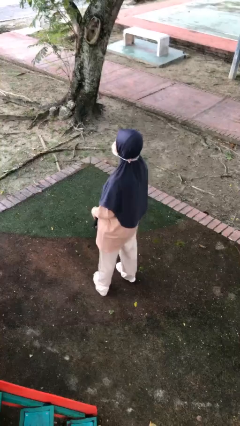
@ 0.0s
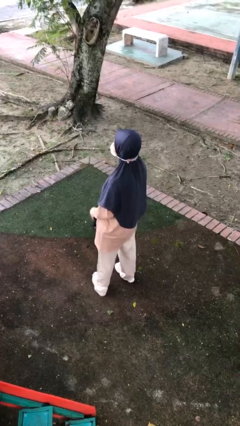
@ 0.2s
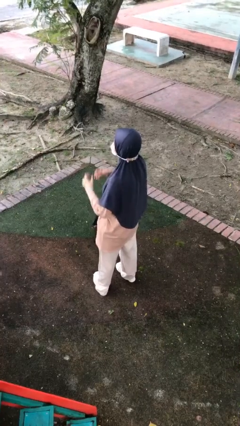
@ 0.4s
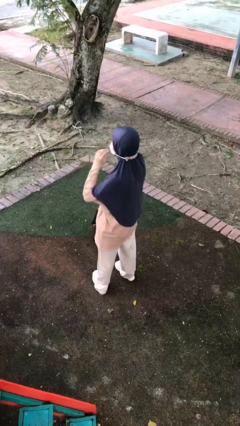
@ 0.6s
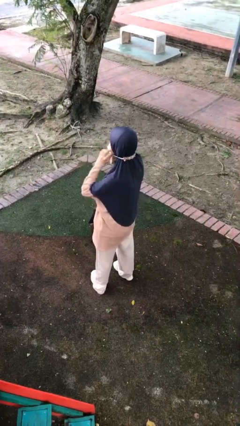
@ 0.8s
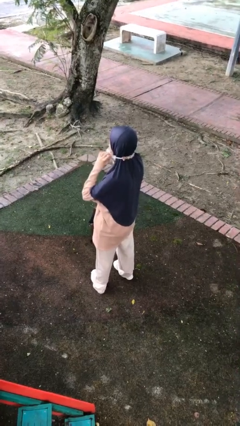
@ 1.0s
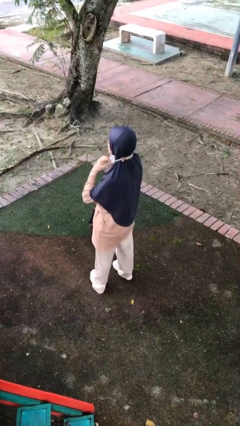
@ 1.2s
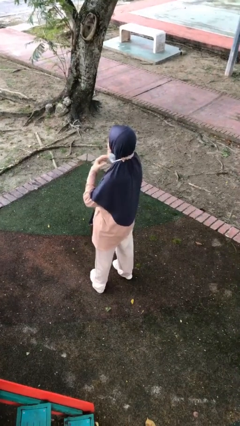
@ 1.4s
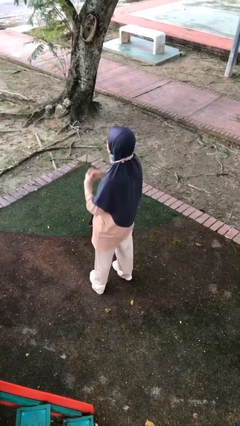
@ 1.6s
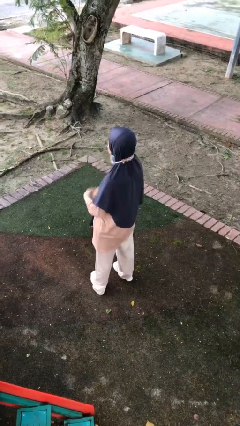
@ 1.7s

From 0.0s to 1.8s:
person takes off facemask

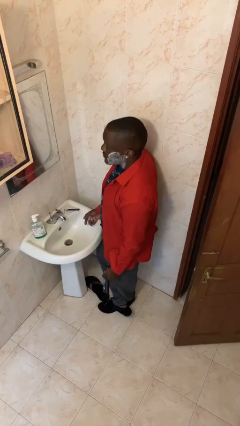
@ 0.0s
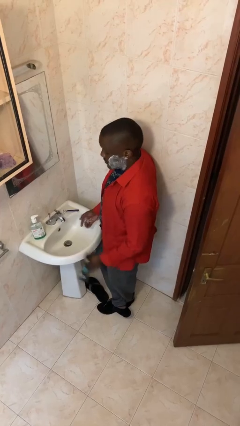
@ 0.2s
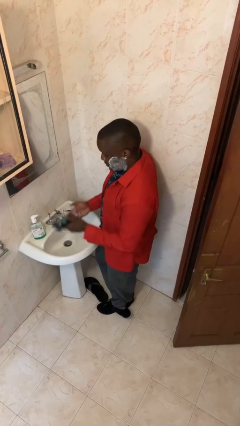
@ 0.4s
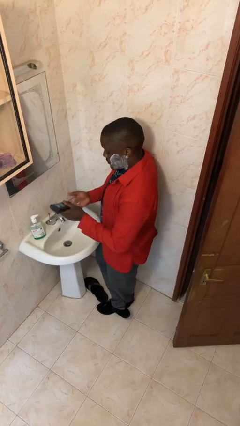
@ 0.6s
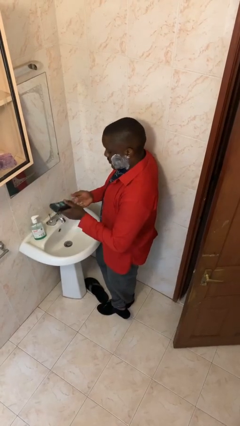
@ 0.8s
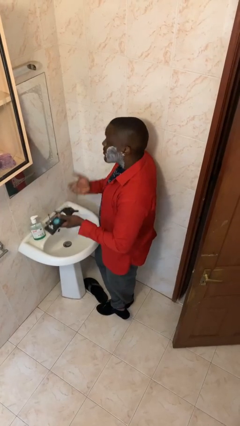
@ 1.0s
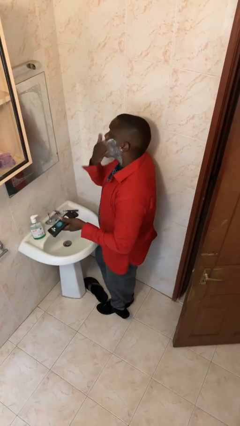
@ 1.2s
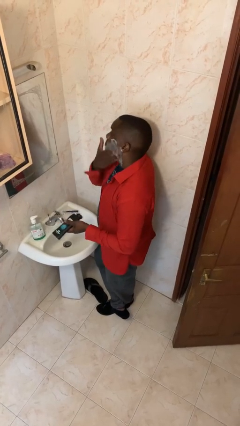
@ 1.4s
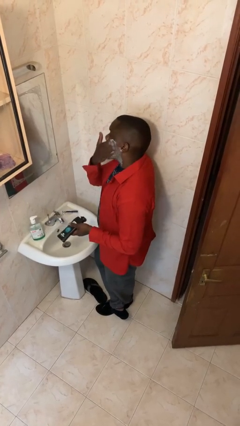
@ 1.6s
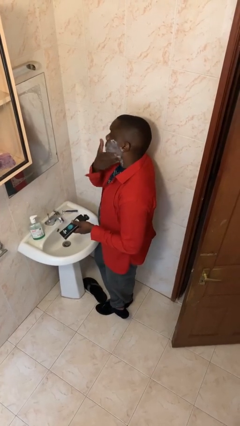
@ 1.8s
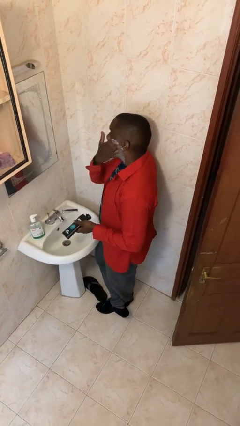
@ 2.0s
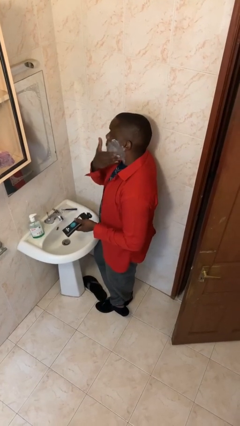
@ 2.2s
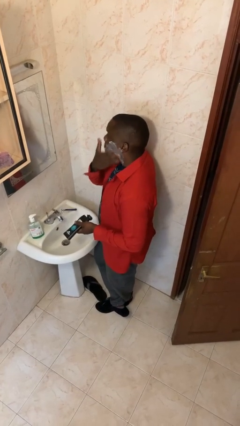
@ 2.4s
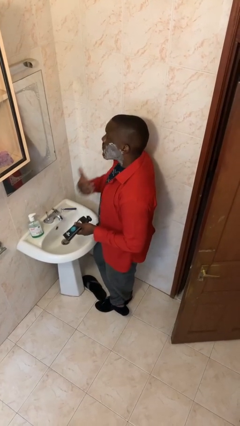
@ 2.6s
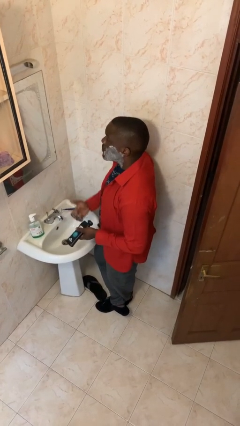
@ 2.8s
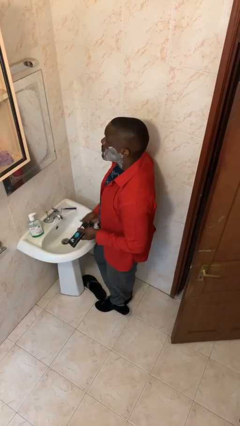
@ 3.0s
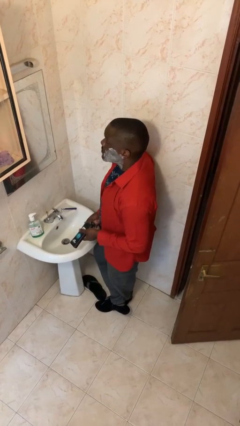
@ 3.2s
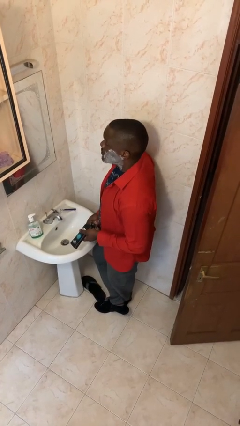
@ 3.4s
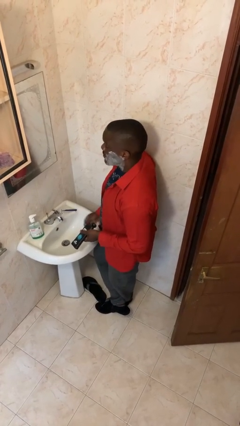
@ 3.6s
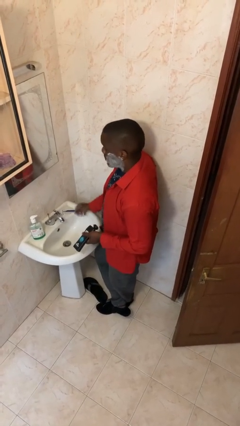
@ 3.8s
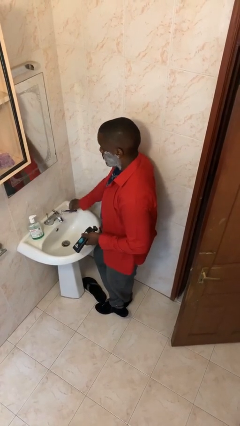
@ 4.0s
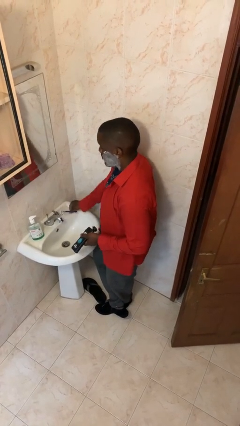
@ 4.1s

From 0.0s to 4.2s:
person applies shaving cream

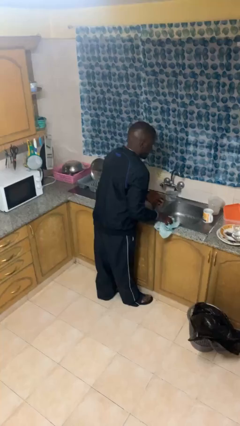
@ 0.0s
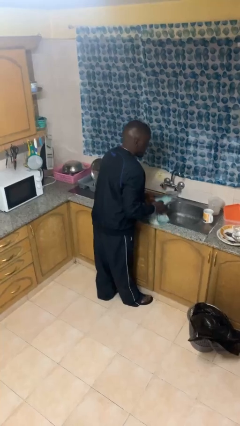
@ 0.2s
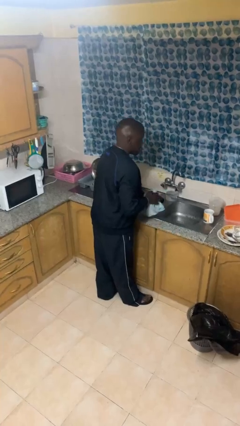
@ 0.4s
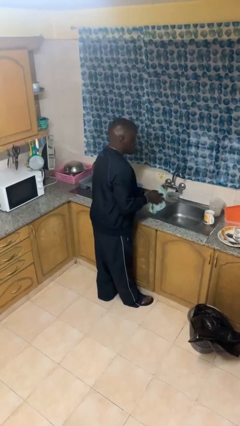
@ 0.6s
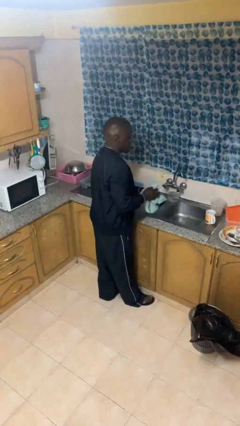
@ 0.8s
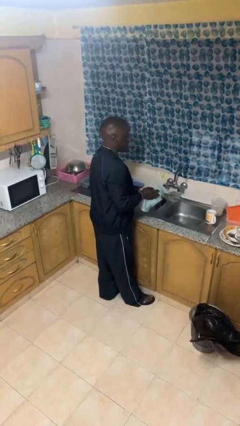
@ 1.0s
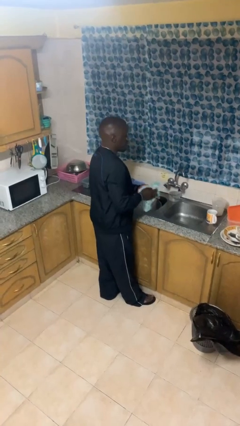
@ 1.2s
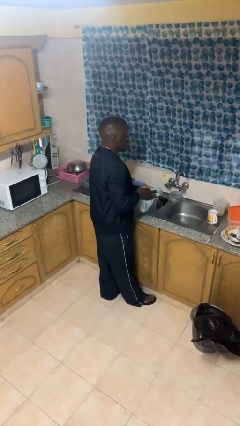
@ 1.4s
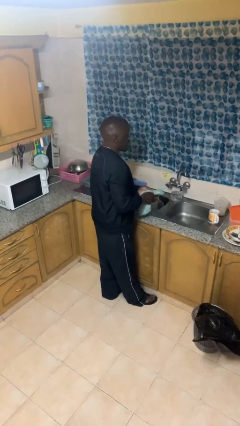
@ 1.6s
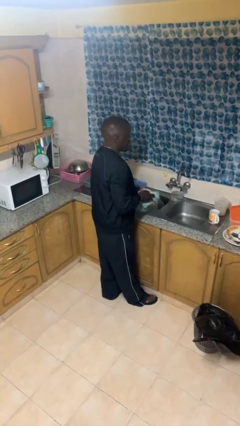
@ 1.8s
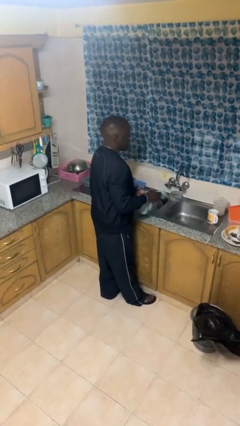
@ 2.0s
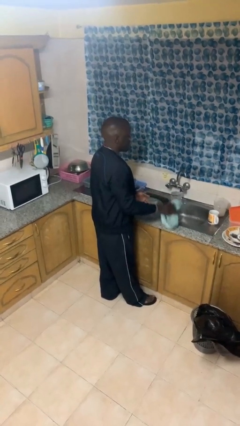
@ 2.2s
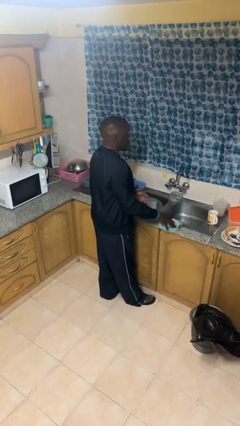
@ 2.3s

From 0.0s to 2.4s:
person dries hands with towel

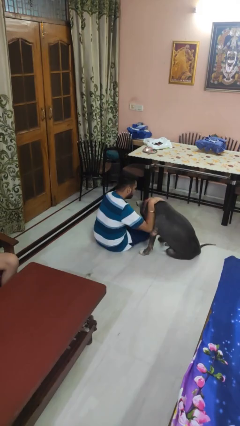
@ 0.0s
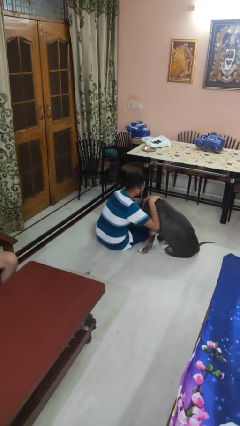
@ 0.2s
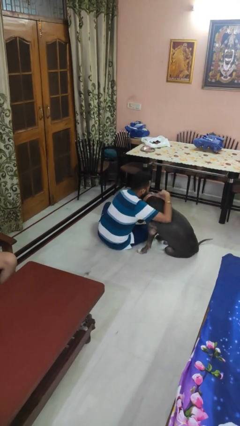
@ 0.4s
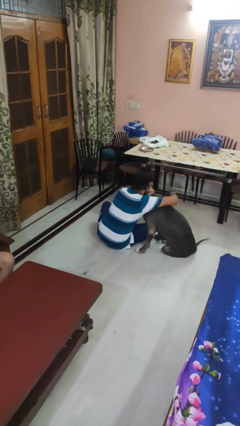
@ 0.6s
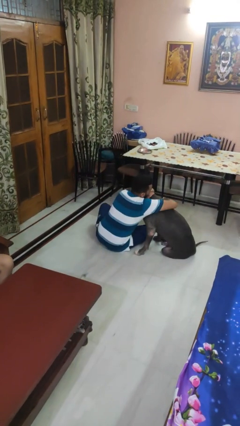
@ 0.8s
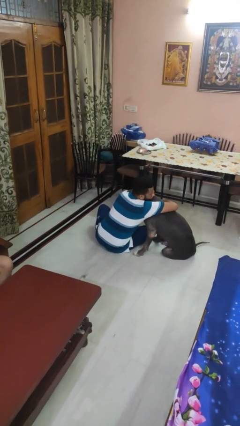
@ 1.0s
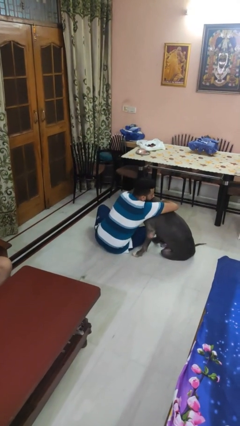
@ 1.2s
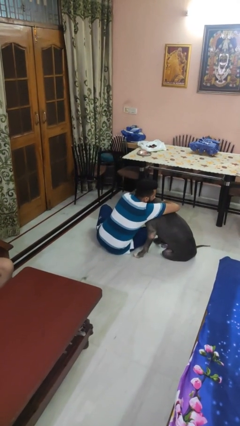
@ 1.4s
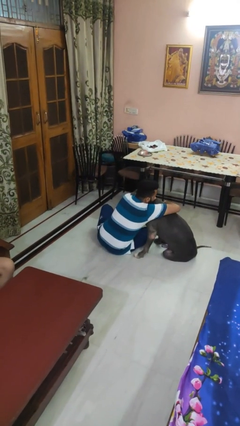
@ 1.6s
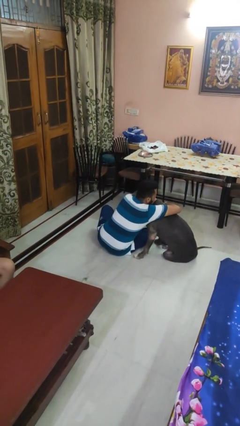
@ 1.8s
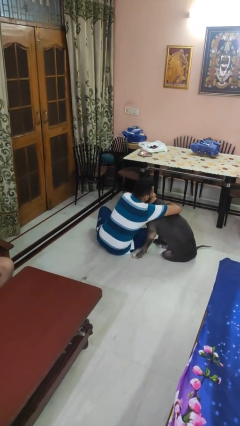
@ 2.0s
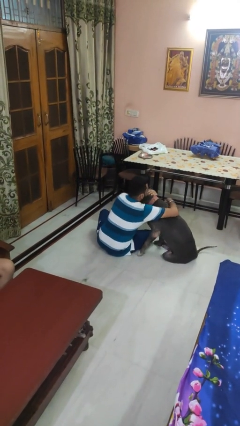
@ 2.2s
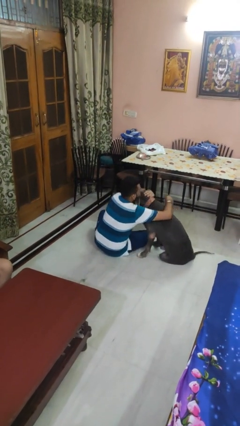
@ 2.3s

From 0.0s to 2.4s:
person hugs dog

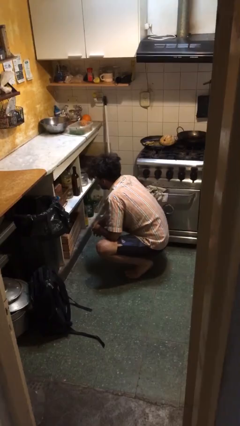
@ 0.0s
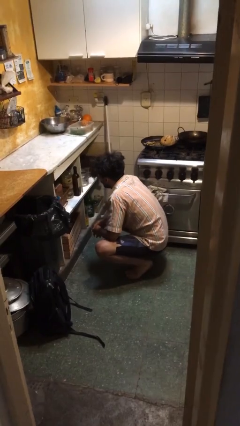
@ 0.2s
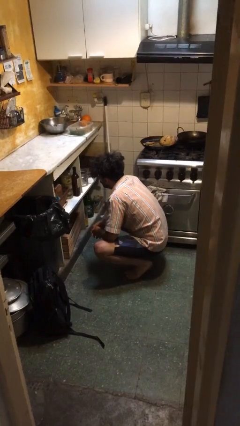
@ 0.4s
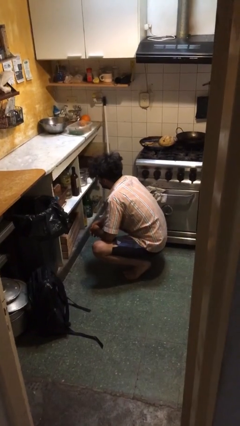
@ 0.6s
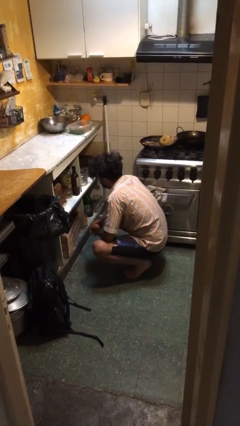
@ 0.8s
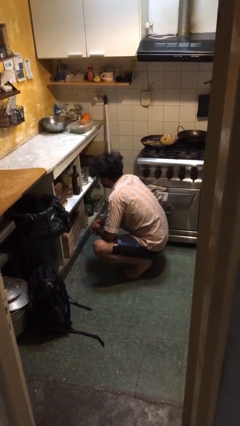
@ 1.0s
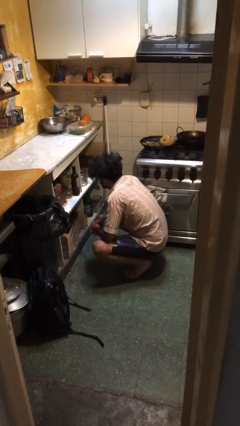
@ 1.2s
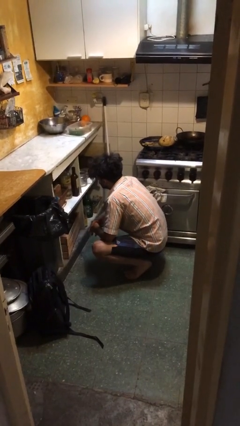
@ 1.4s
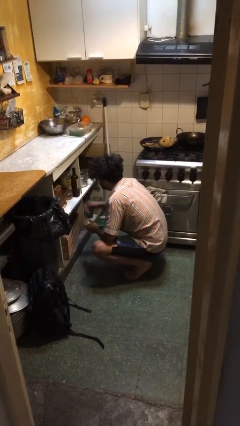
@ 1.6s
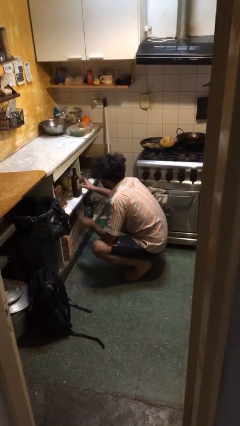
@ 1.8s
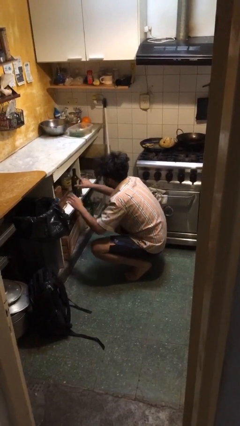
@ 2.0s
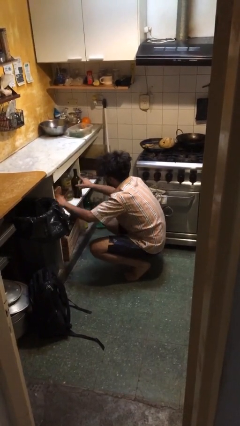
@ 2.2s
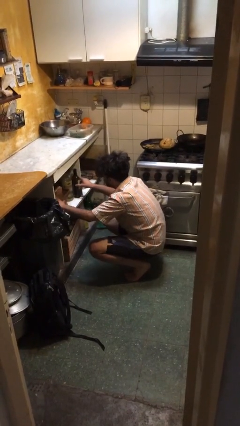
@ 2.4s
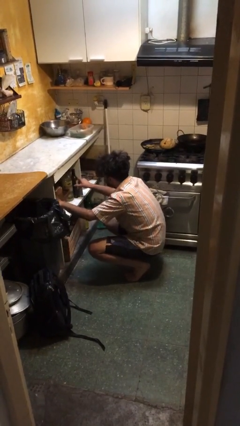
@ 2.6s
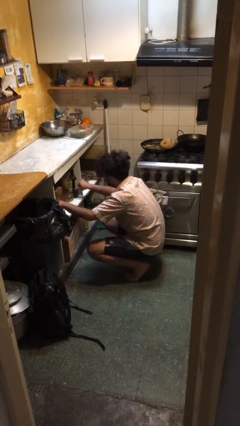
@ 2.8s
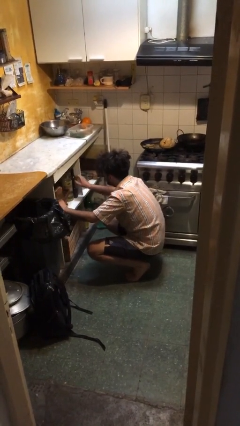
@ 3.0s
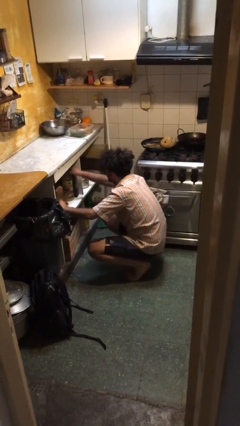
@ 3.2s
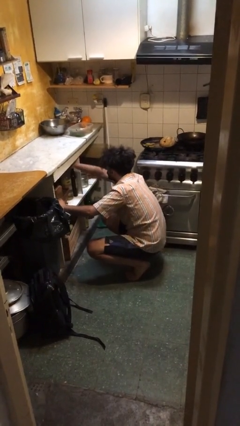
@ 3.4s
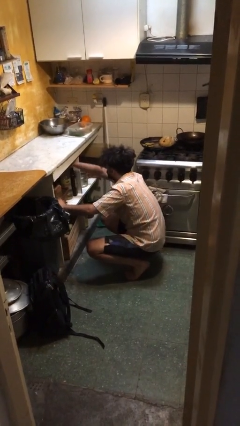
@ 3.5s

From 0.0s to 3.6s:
person searches in cabinet

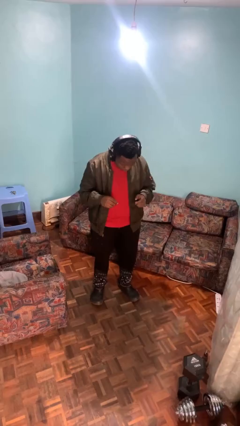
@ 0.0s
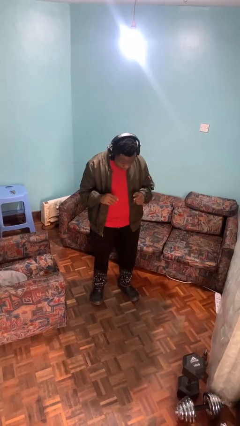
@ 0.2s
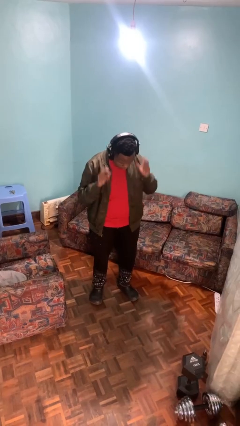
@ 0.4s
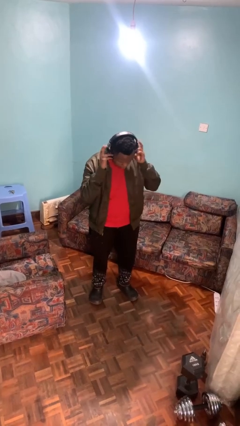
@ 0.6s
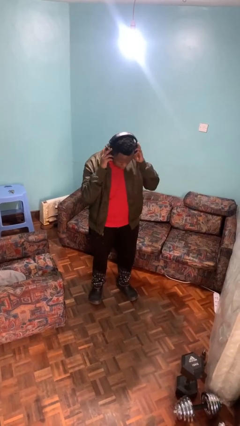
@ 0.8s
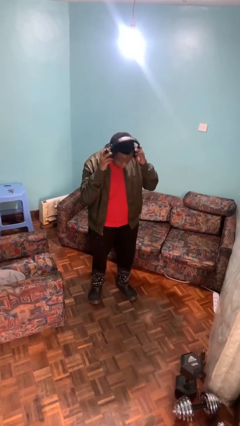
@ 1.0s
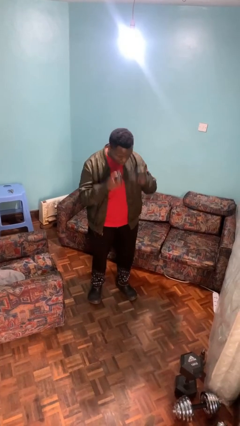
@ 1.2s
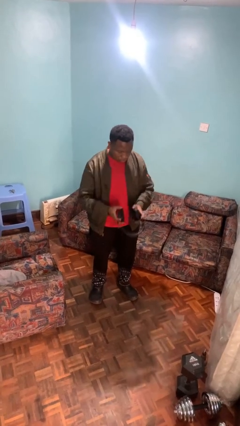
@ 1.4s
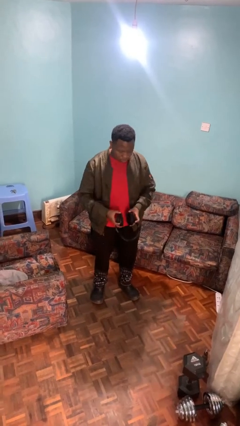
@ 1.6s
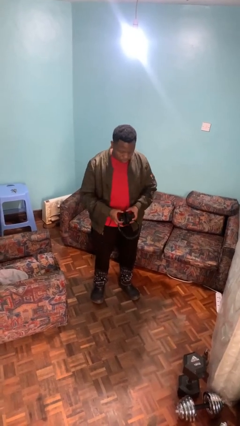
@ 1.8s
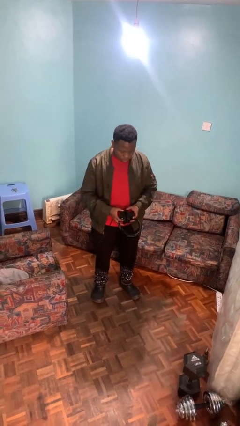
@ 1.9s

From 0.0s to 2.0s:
person takes off headphones

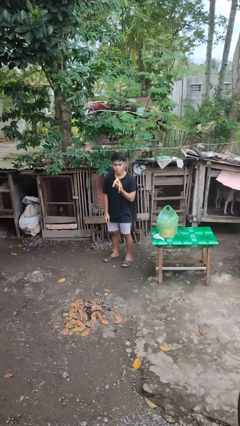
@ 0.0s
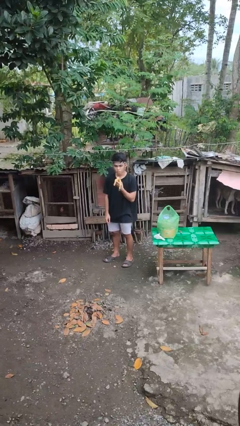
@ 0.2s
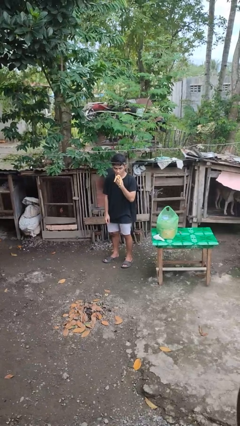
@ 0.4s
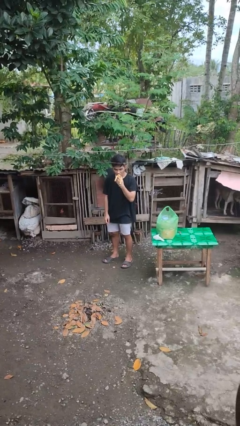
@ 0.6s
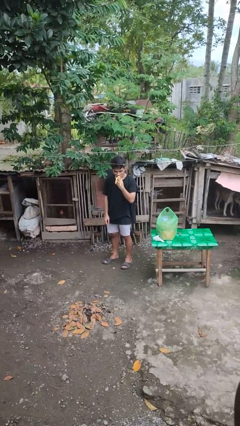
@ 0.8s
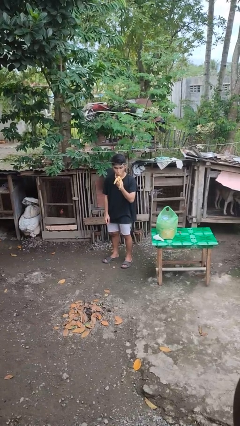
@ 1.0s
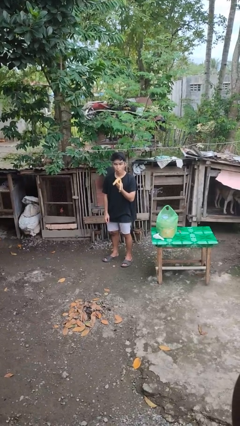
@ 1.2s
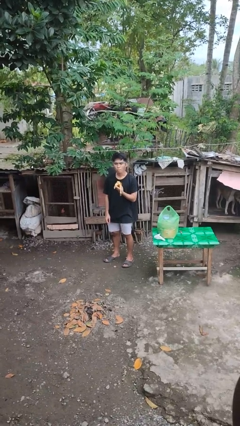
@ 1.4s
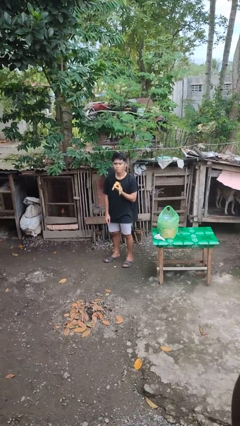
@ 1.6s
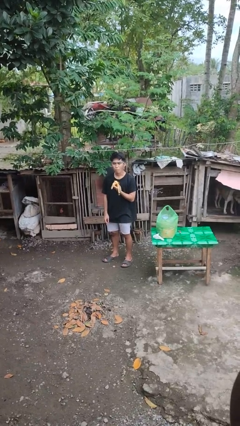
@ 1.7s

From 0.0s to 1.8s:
person eats banana
